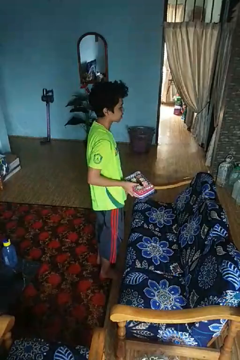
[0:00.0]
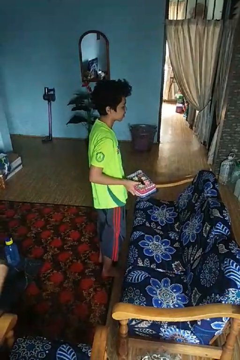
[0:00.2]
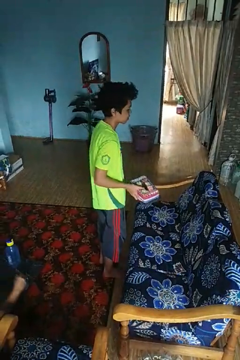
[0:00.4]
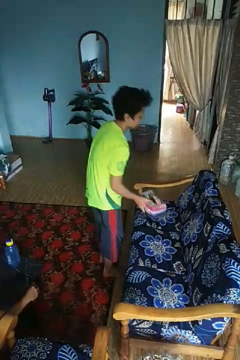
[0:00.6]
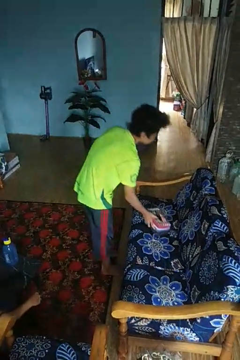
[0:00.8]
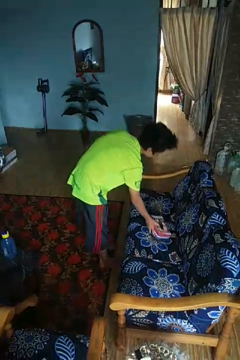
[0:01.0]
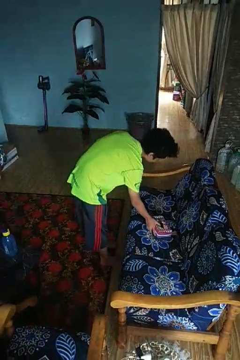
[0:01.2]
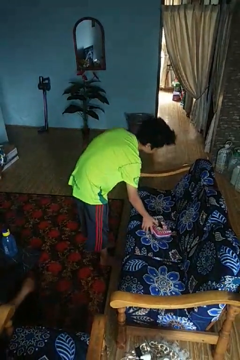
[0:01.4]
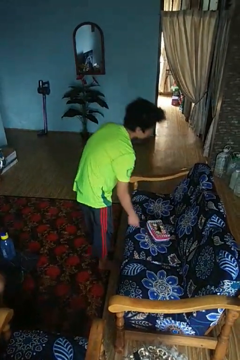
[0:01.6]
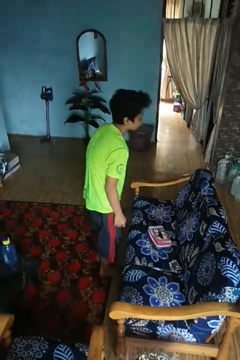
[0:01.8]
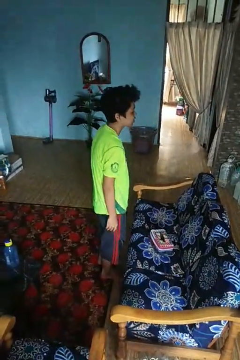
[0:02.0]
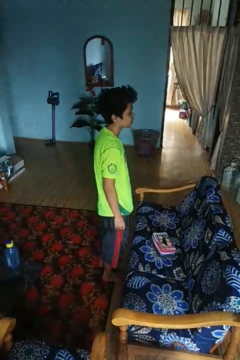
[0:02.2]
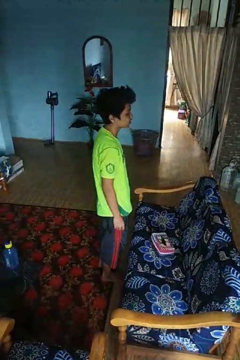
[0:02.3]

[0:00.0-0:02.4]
person puts down object on couch

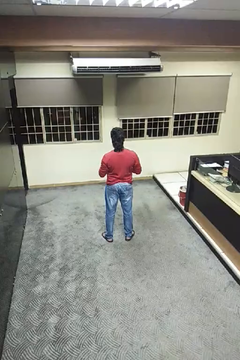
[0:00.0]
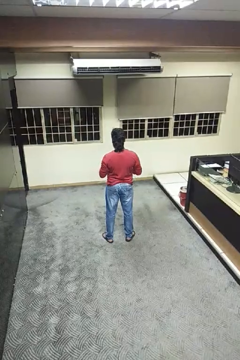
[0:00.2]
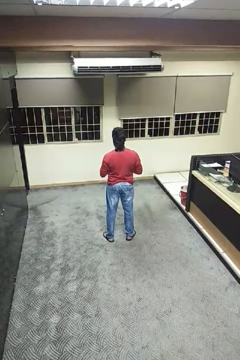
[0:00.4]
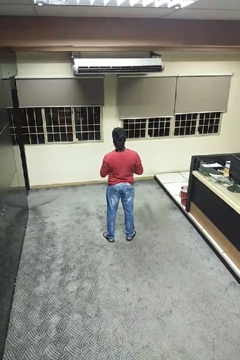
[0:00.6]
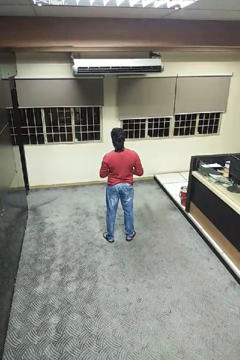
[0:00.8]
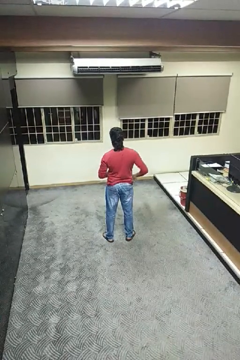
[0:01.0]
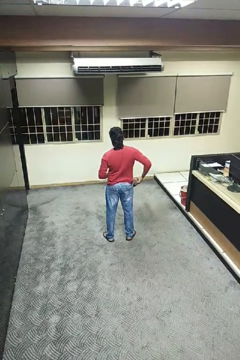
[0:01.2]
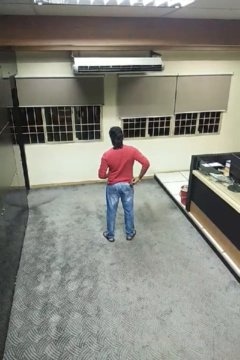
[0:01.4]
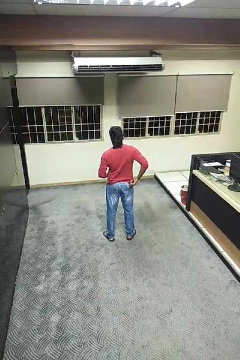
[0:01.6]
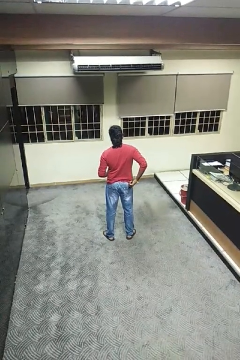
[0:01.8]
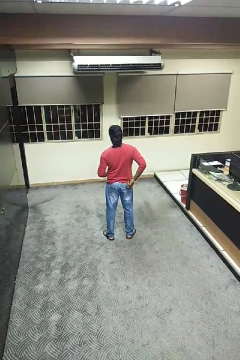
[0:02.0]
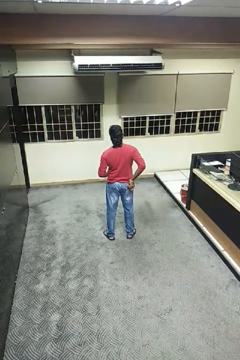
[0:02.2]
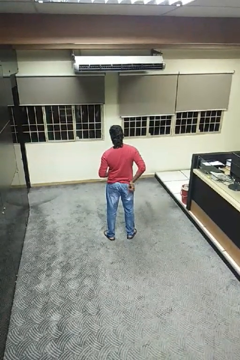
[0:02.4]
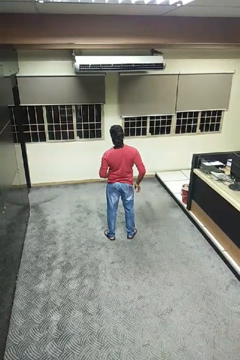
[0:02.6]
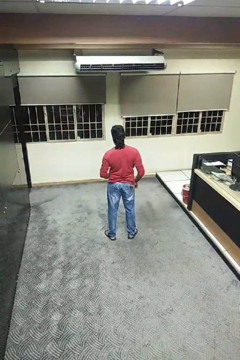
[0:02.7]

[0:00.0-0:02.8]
person puts phone into pocket

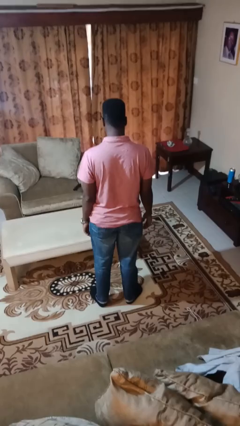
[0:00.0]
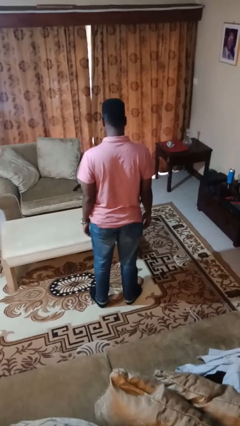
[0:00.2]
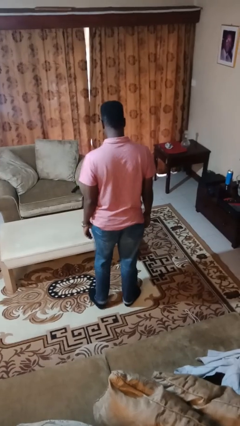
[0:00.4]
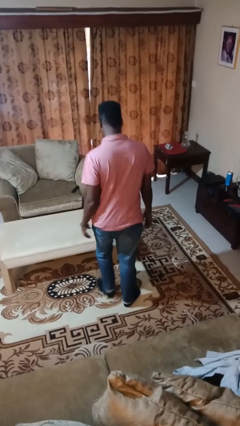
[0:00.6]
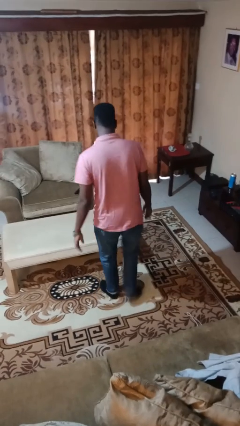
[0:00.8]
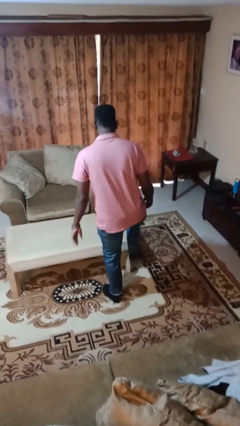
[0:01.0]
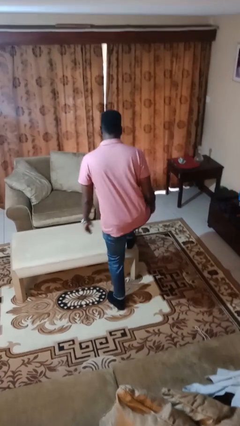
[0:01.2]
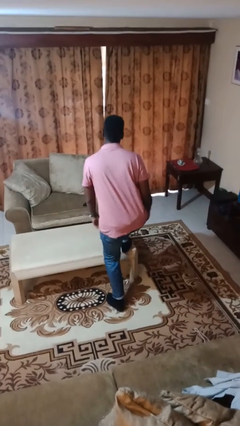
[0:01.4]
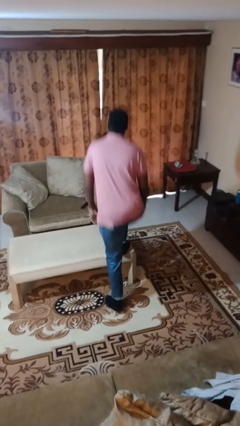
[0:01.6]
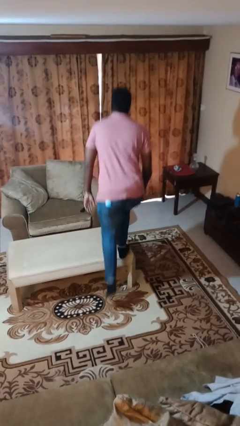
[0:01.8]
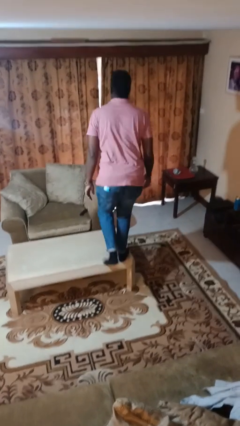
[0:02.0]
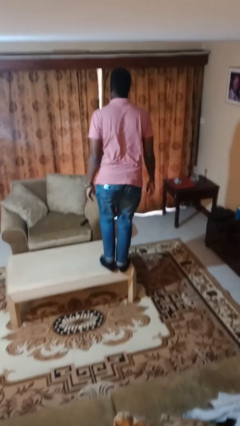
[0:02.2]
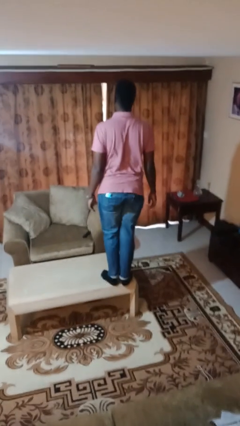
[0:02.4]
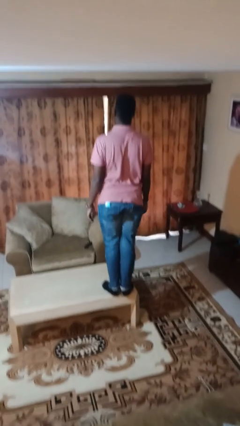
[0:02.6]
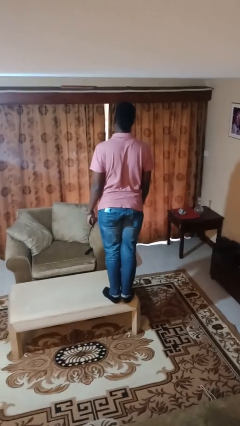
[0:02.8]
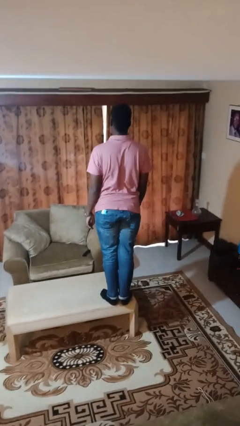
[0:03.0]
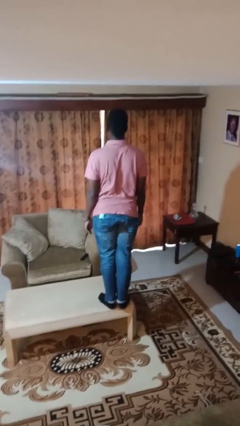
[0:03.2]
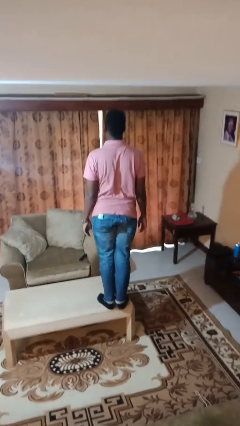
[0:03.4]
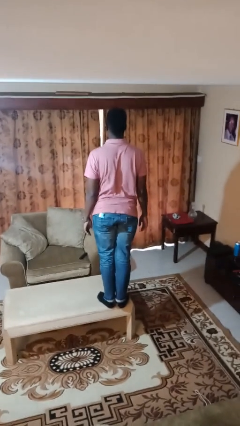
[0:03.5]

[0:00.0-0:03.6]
person climbs on table

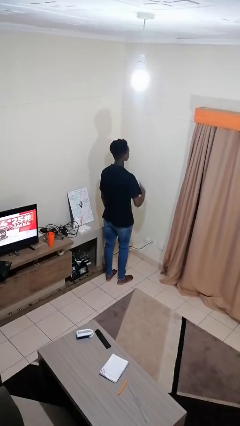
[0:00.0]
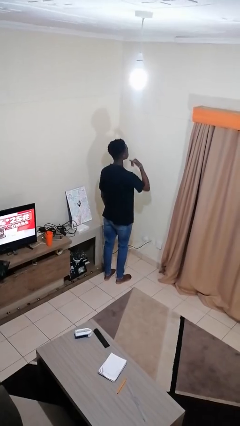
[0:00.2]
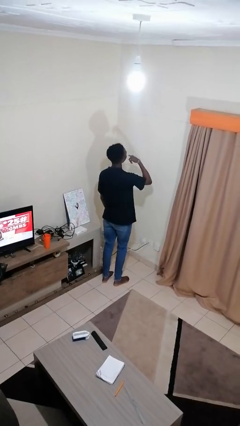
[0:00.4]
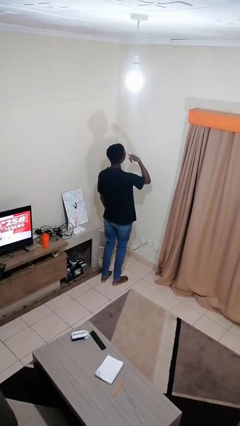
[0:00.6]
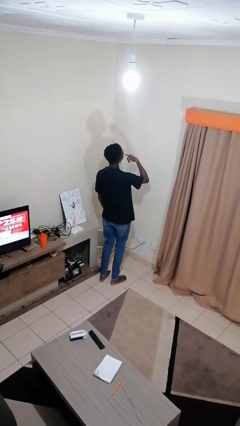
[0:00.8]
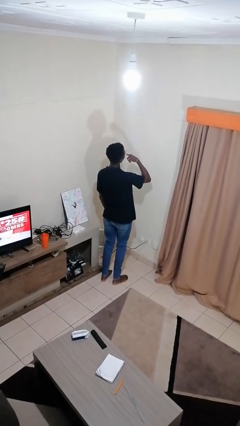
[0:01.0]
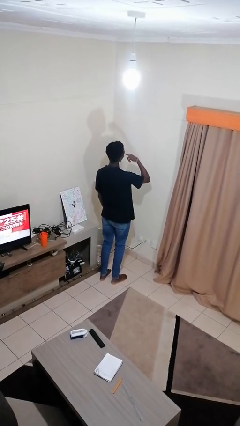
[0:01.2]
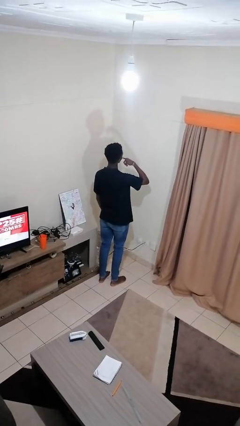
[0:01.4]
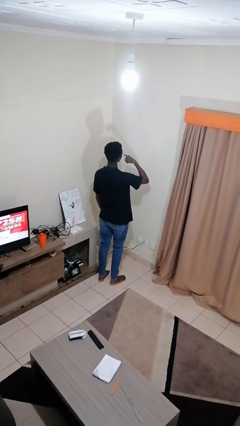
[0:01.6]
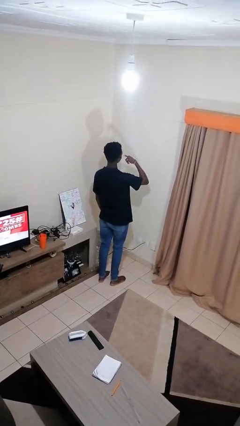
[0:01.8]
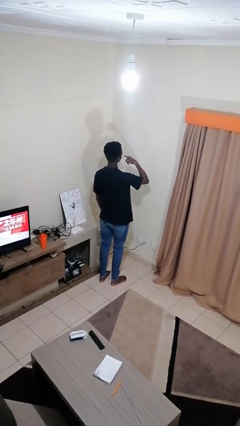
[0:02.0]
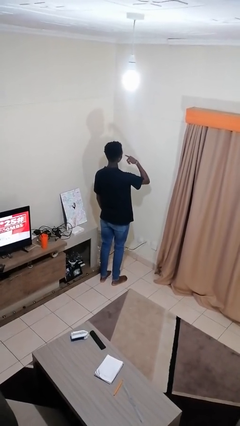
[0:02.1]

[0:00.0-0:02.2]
person gestures call me

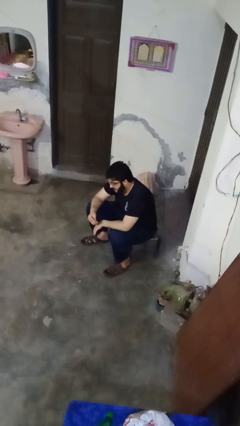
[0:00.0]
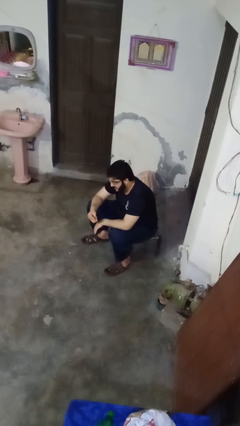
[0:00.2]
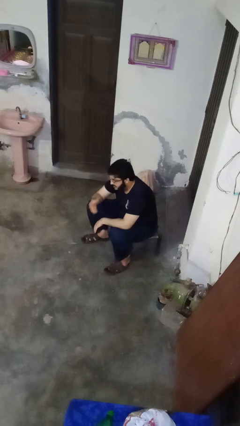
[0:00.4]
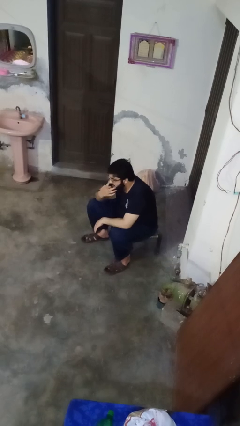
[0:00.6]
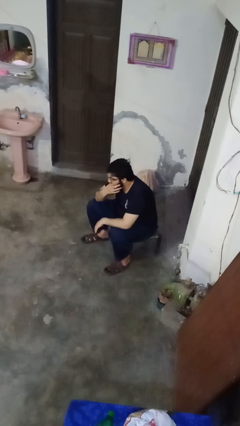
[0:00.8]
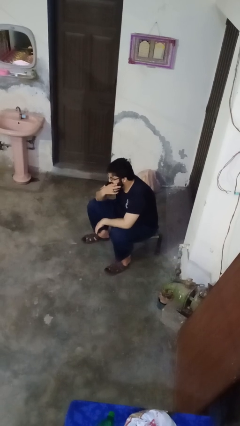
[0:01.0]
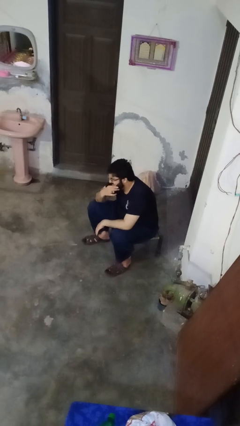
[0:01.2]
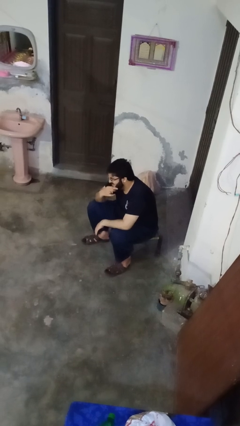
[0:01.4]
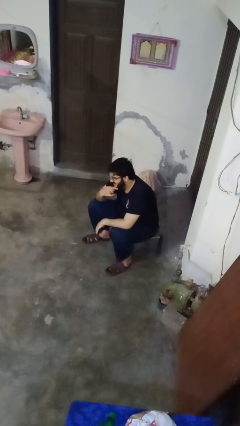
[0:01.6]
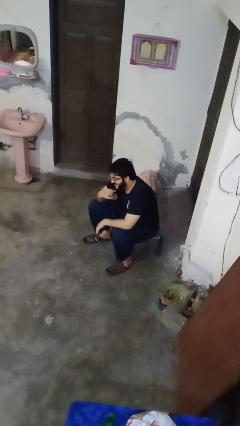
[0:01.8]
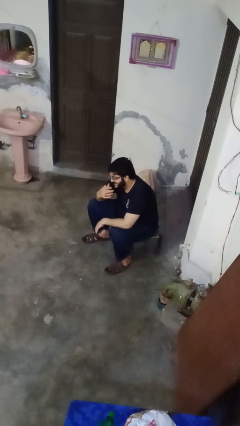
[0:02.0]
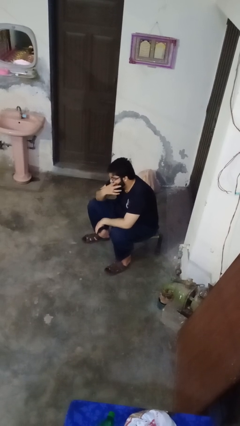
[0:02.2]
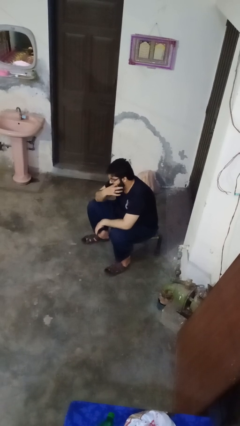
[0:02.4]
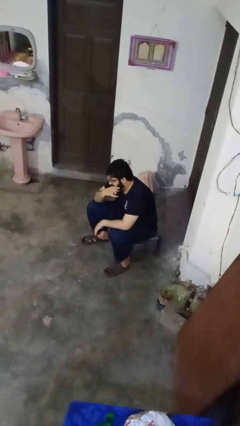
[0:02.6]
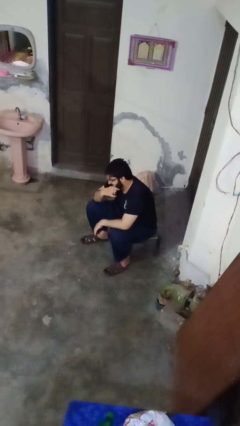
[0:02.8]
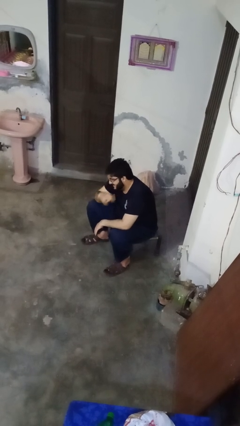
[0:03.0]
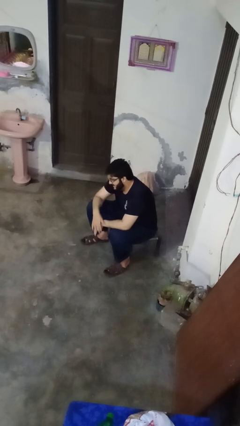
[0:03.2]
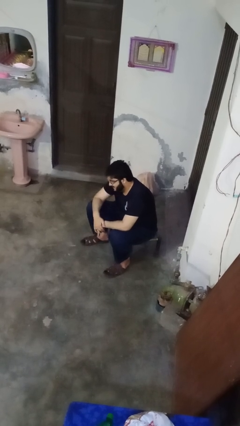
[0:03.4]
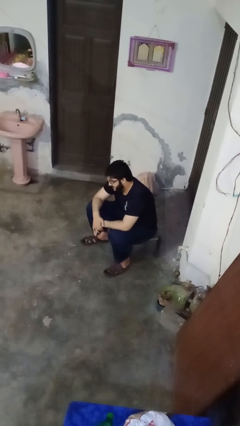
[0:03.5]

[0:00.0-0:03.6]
person strokes chin

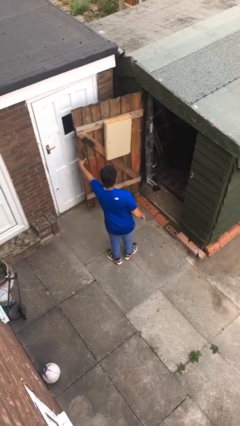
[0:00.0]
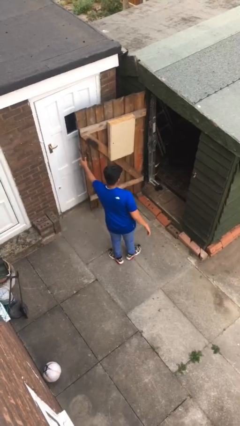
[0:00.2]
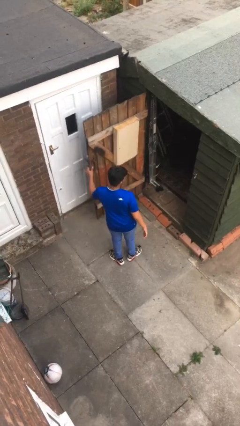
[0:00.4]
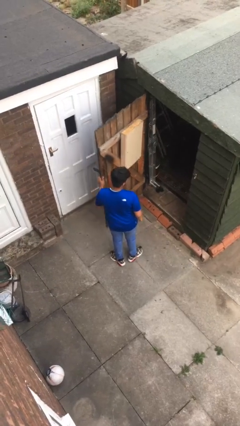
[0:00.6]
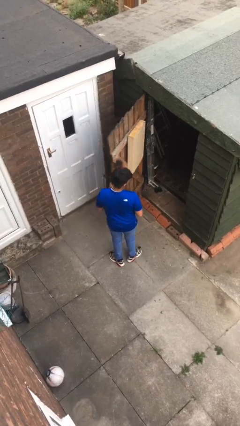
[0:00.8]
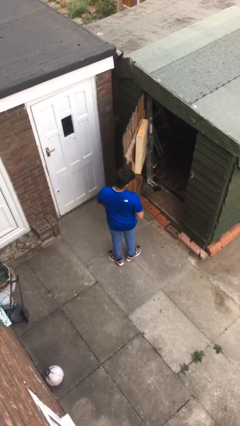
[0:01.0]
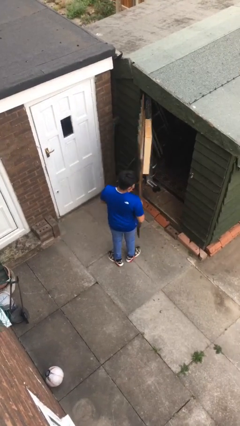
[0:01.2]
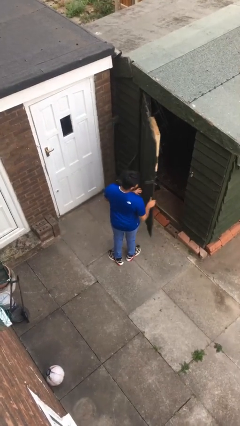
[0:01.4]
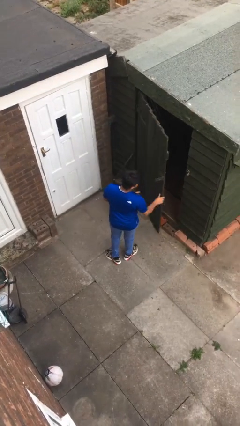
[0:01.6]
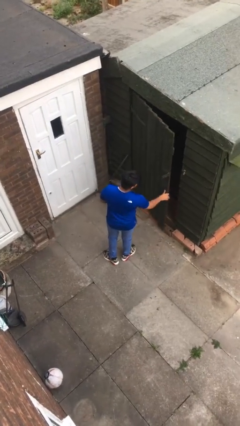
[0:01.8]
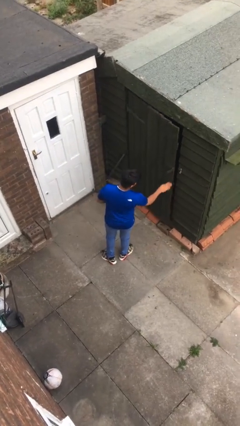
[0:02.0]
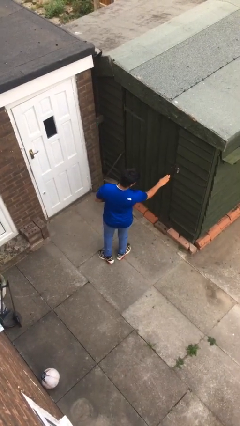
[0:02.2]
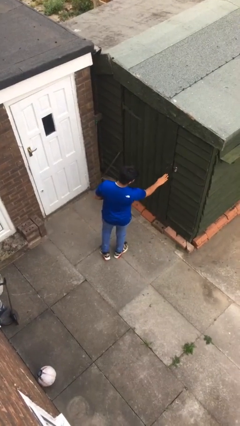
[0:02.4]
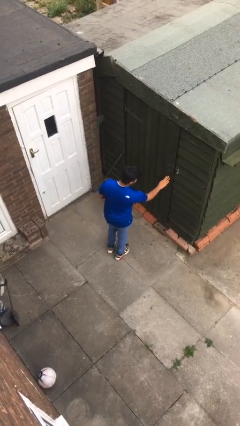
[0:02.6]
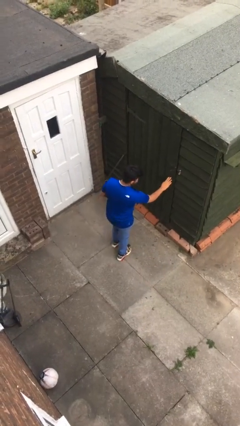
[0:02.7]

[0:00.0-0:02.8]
person closes facility door

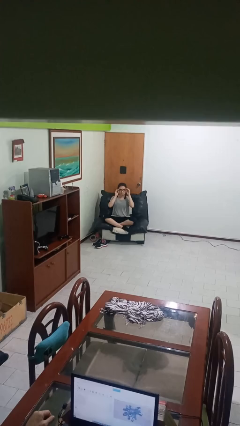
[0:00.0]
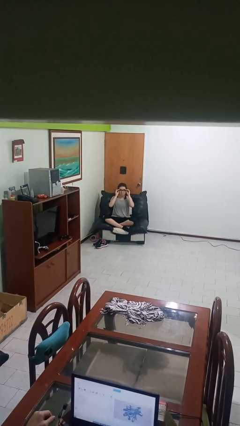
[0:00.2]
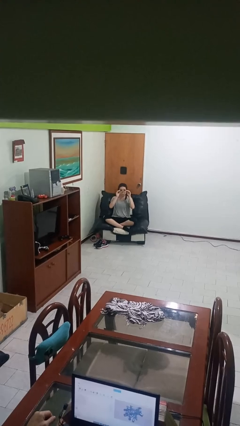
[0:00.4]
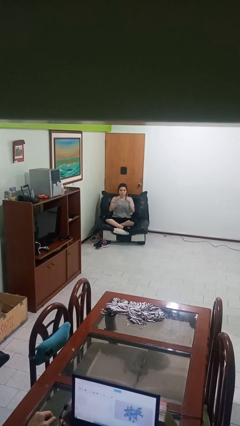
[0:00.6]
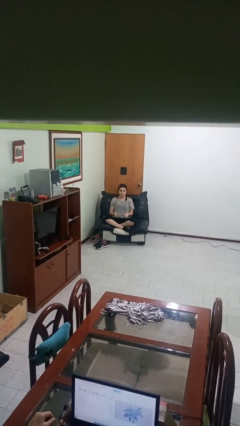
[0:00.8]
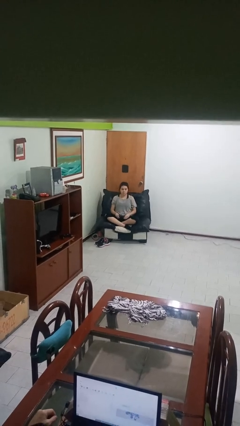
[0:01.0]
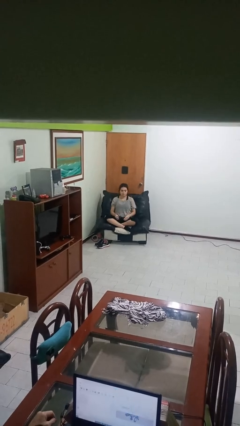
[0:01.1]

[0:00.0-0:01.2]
person takes off glasses
